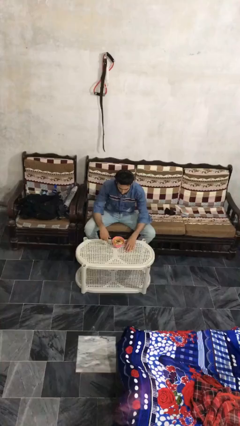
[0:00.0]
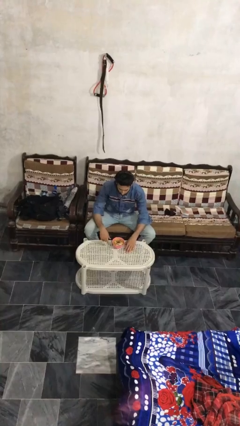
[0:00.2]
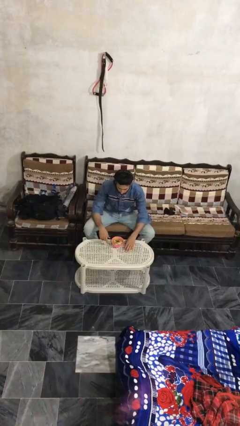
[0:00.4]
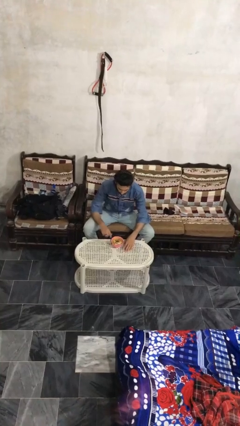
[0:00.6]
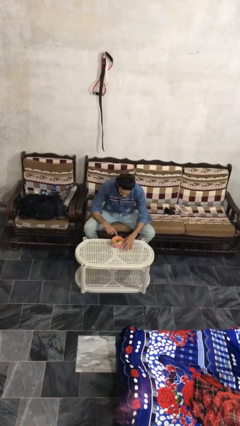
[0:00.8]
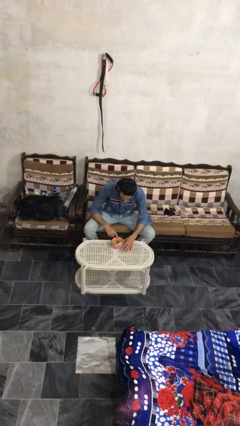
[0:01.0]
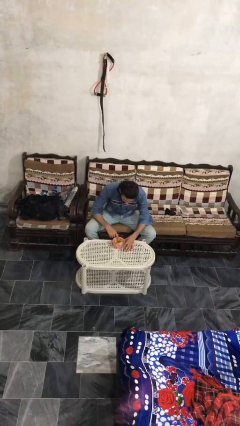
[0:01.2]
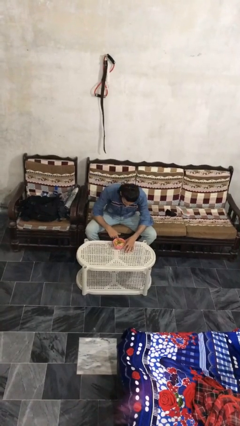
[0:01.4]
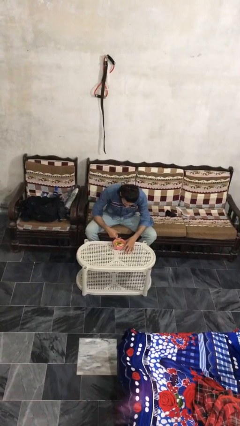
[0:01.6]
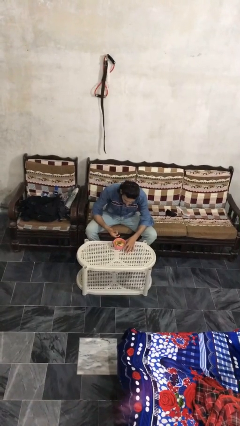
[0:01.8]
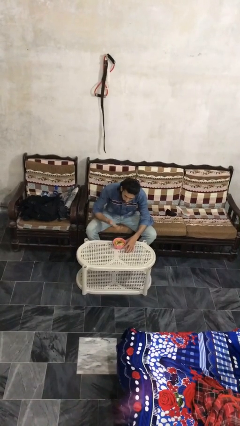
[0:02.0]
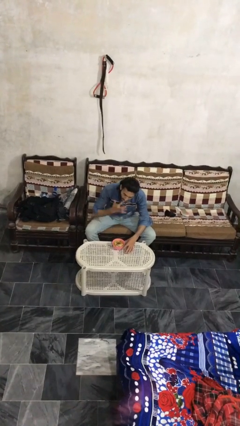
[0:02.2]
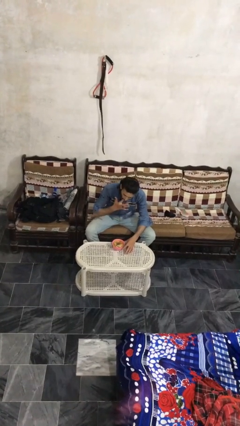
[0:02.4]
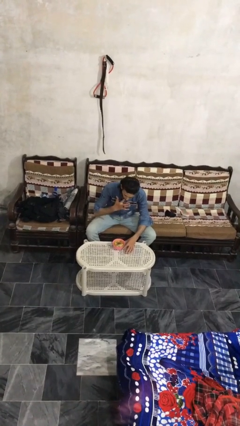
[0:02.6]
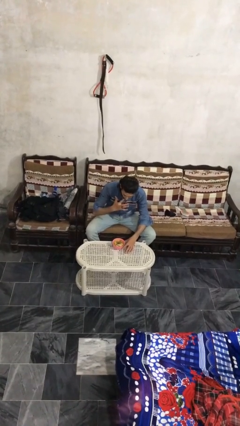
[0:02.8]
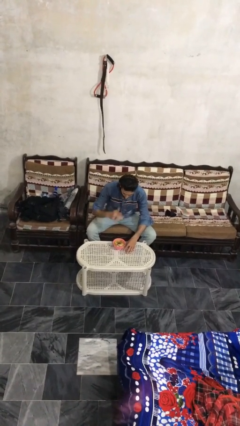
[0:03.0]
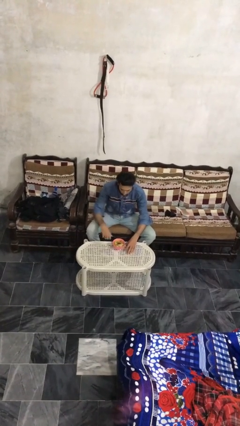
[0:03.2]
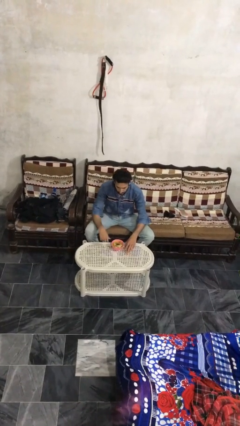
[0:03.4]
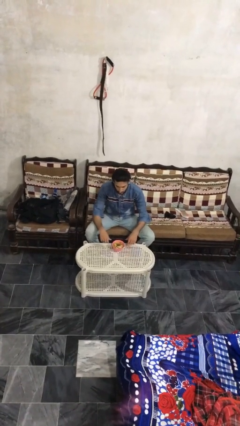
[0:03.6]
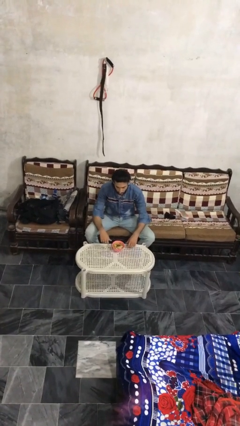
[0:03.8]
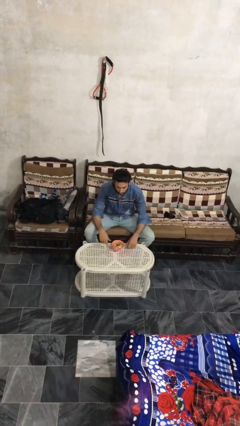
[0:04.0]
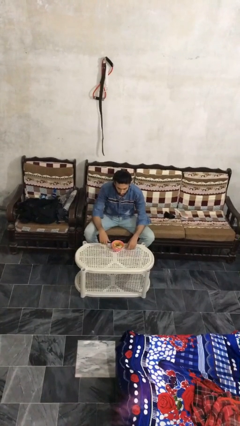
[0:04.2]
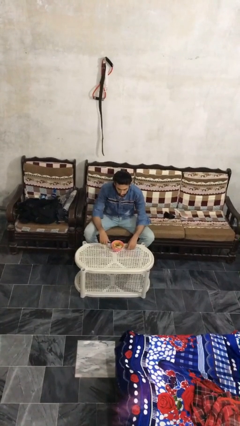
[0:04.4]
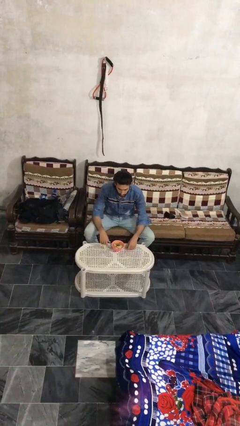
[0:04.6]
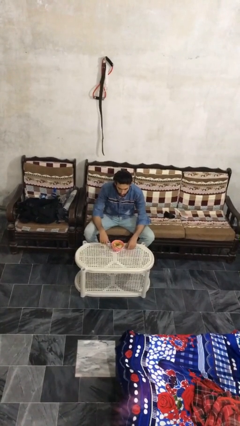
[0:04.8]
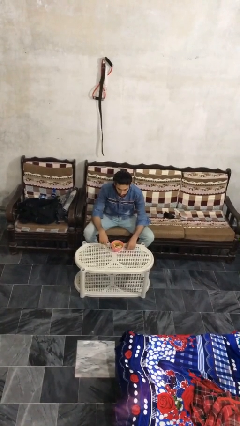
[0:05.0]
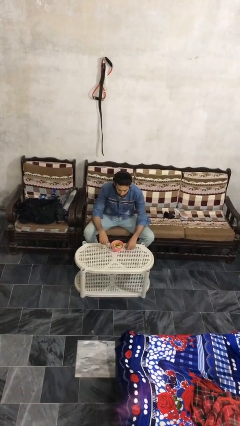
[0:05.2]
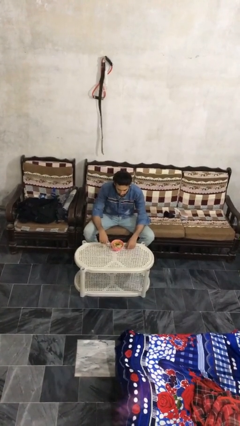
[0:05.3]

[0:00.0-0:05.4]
person eats with hands

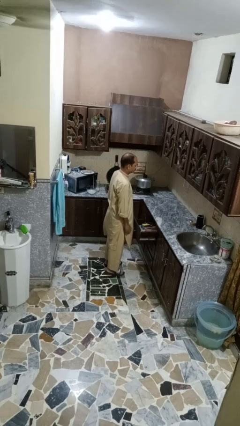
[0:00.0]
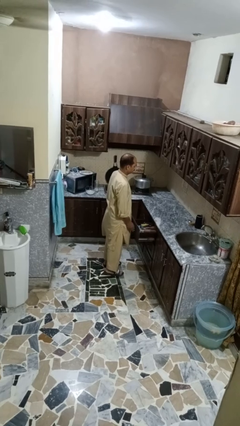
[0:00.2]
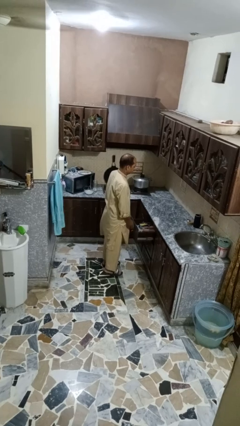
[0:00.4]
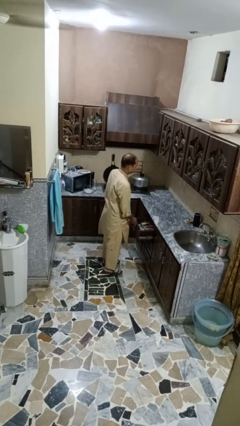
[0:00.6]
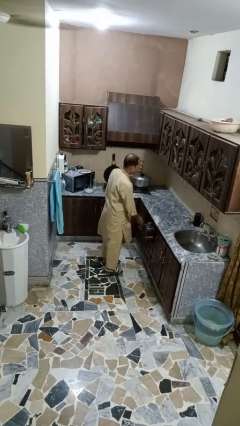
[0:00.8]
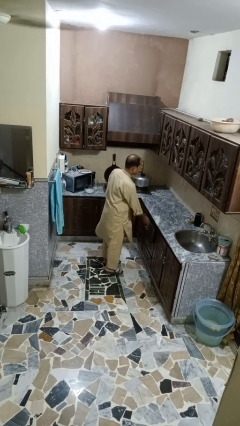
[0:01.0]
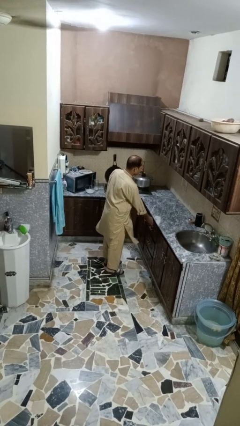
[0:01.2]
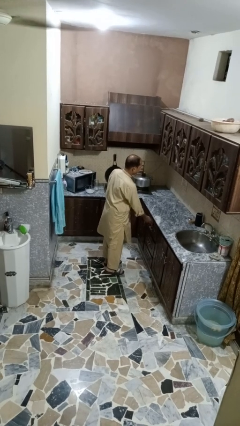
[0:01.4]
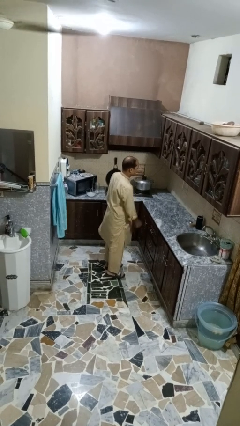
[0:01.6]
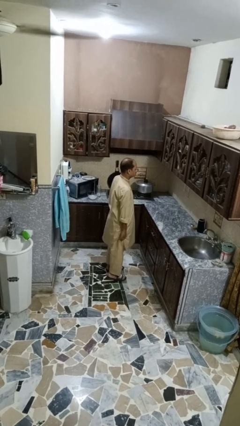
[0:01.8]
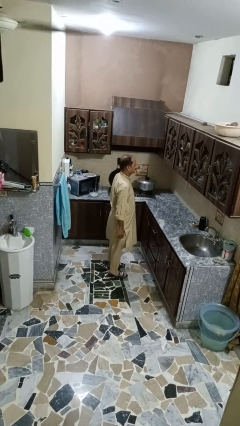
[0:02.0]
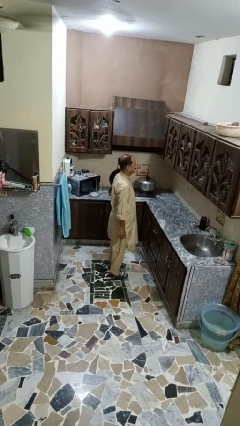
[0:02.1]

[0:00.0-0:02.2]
person closes kitchen drawer

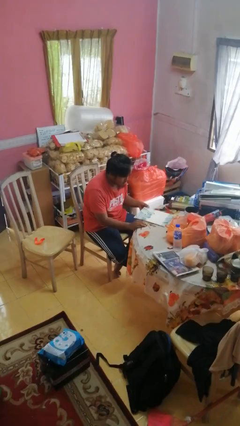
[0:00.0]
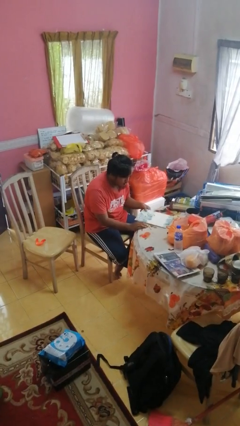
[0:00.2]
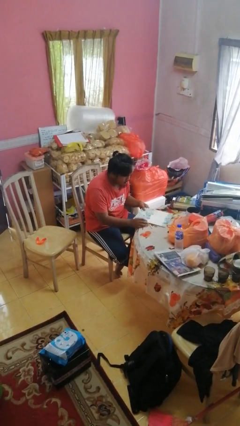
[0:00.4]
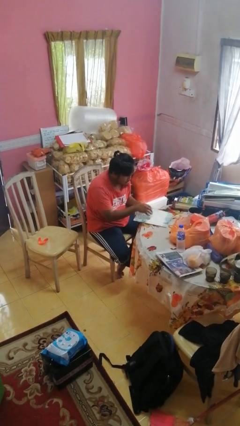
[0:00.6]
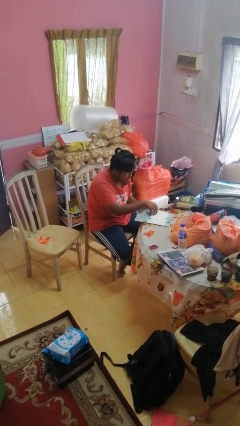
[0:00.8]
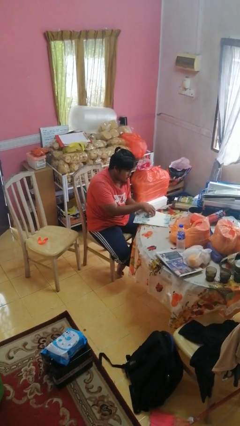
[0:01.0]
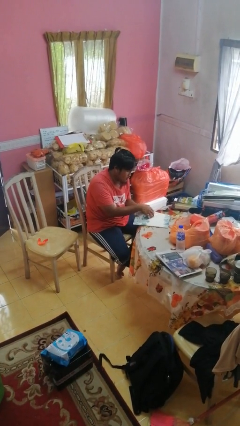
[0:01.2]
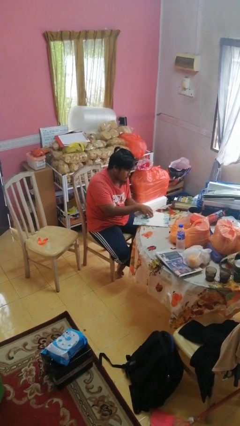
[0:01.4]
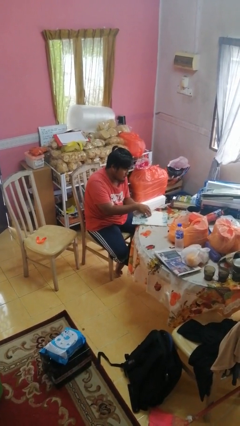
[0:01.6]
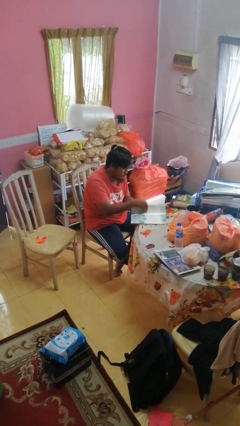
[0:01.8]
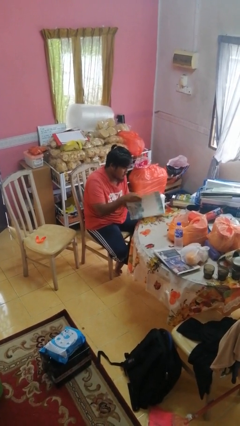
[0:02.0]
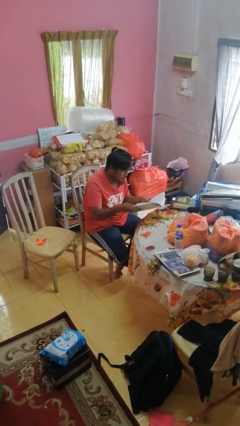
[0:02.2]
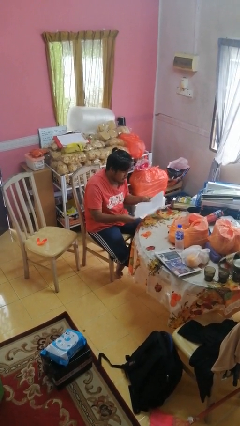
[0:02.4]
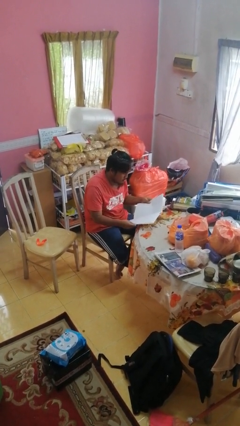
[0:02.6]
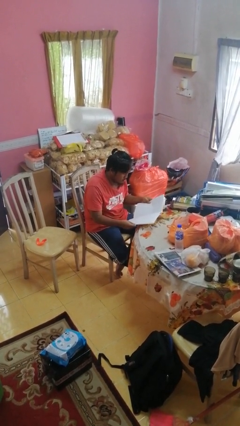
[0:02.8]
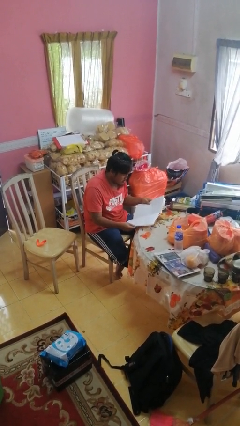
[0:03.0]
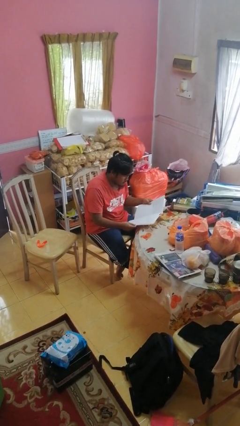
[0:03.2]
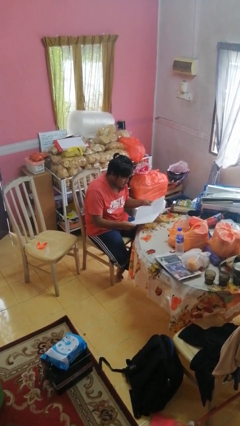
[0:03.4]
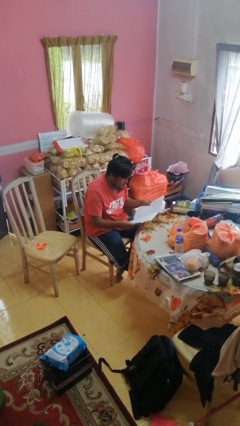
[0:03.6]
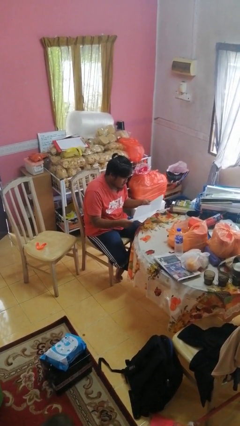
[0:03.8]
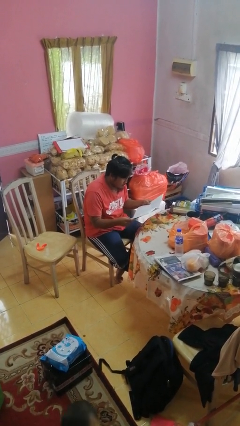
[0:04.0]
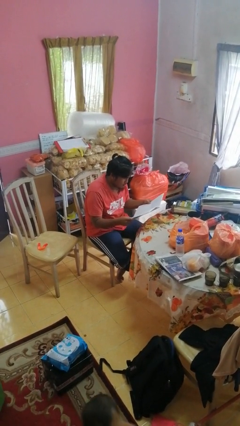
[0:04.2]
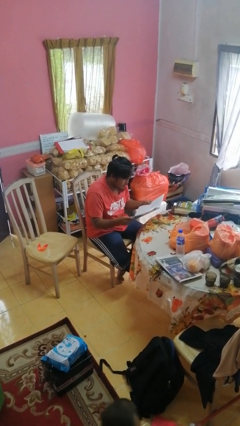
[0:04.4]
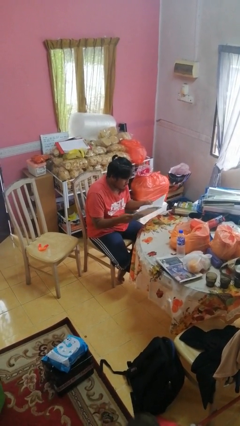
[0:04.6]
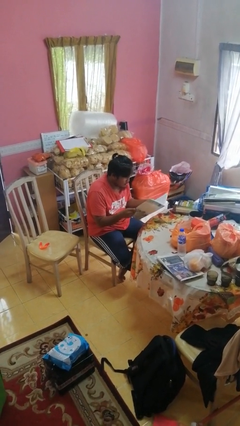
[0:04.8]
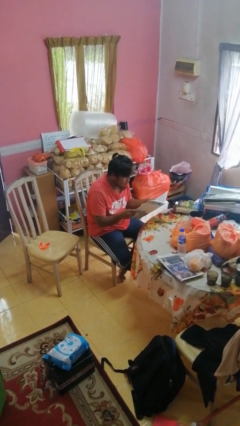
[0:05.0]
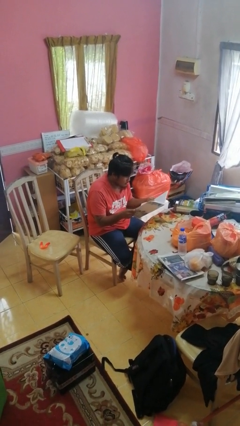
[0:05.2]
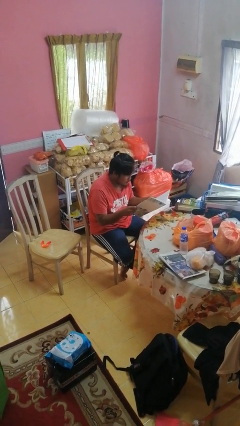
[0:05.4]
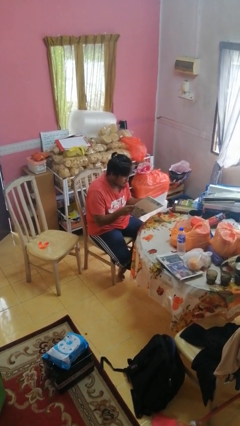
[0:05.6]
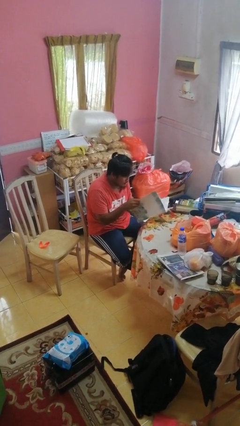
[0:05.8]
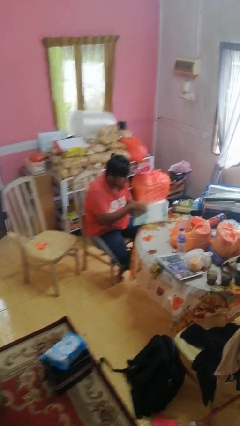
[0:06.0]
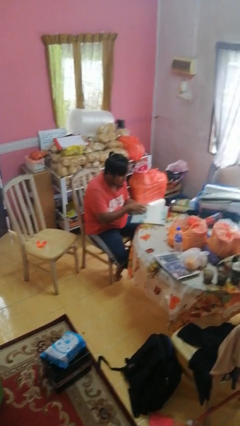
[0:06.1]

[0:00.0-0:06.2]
person reads magazine

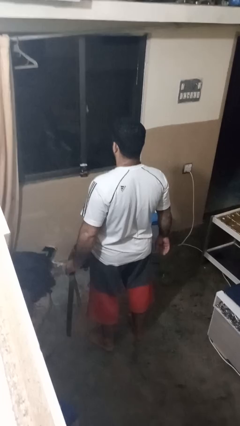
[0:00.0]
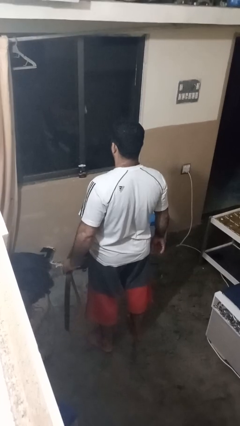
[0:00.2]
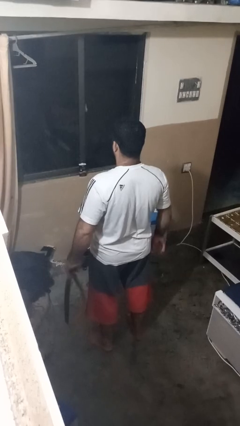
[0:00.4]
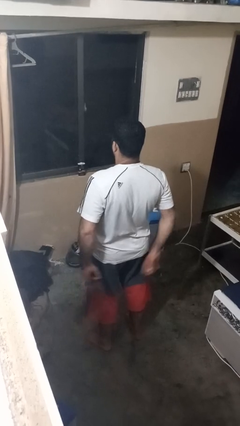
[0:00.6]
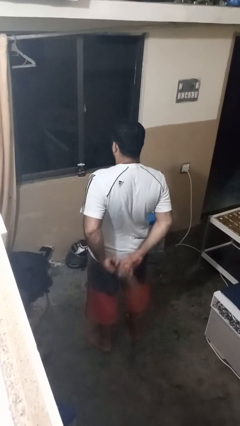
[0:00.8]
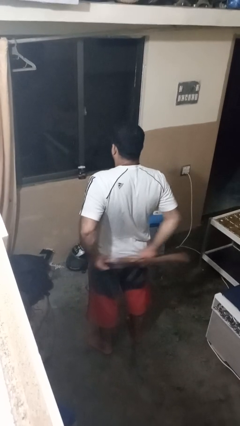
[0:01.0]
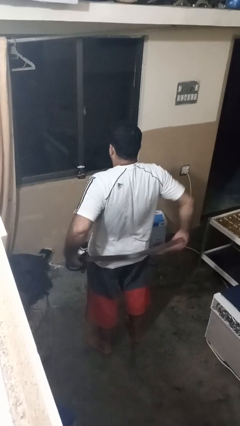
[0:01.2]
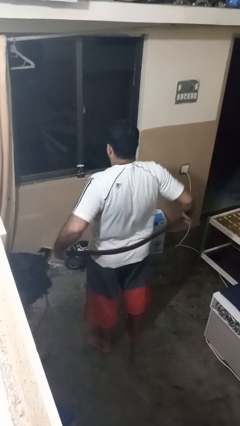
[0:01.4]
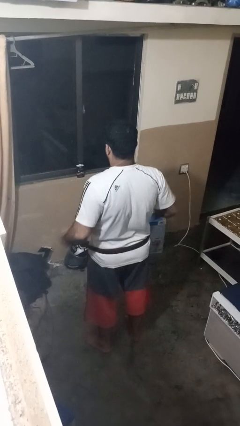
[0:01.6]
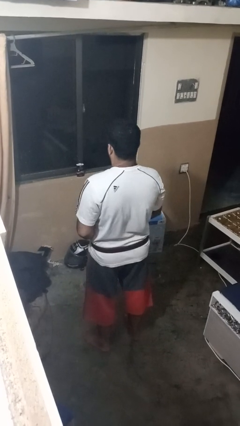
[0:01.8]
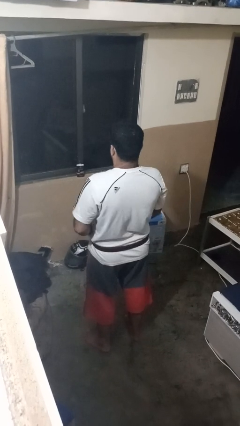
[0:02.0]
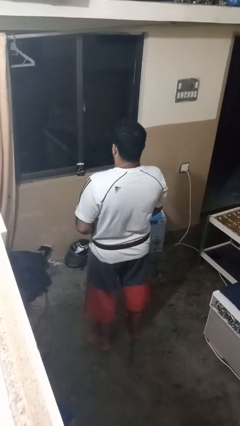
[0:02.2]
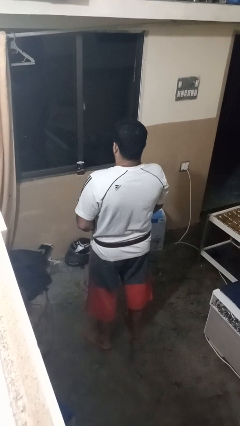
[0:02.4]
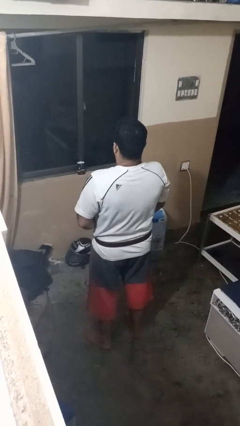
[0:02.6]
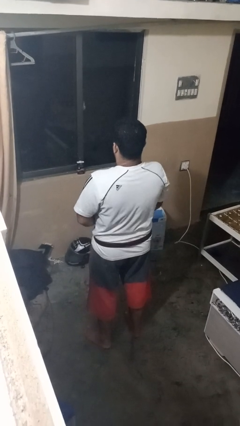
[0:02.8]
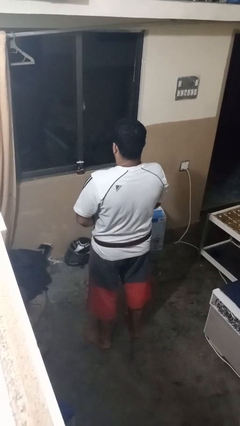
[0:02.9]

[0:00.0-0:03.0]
person puts on belt

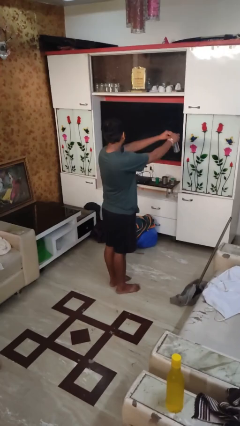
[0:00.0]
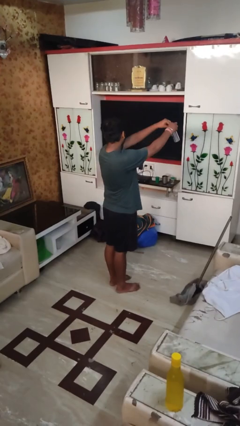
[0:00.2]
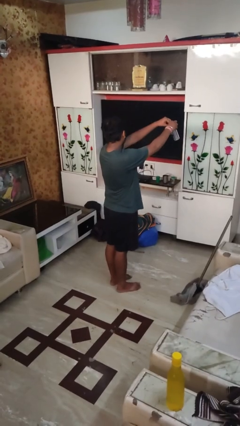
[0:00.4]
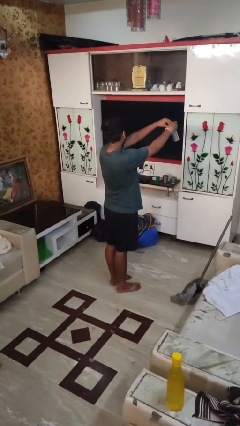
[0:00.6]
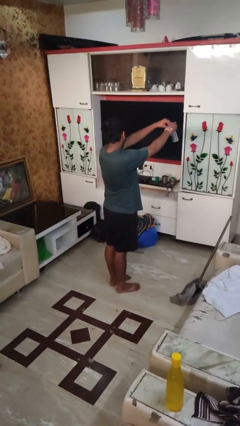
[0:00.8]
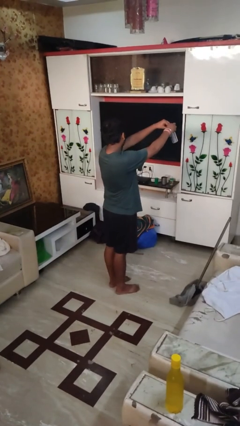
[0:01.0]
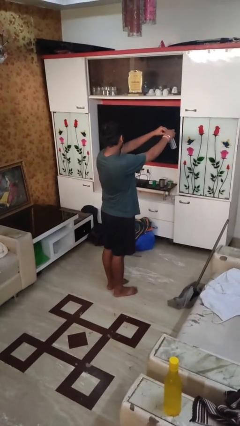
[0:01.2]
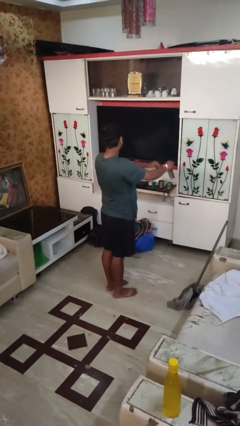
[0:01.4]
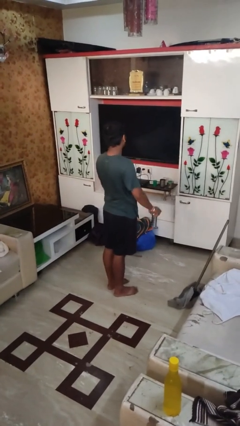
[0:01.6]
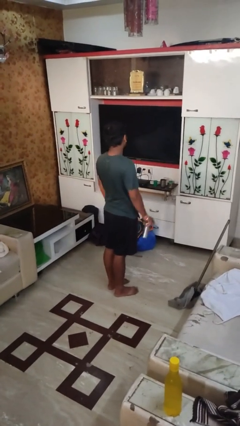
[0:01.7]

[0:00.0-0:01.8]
person opens beverage can
